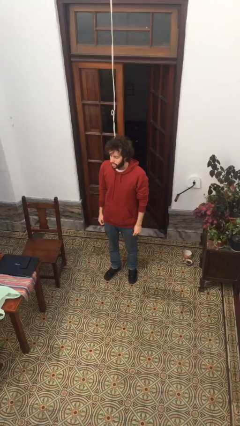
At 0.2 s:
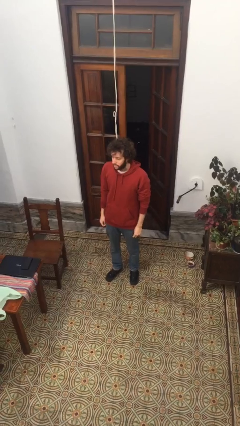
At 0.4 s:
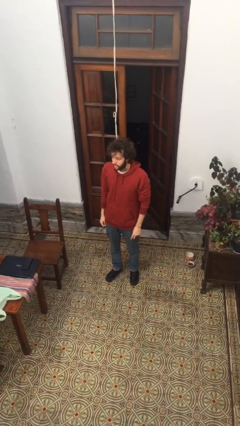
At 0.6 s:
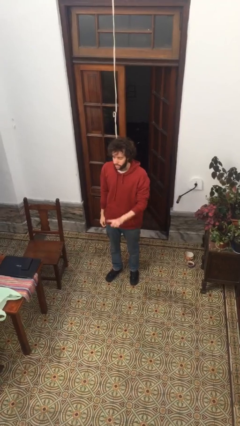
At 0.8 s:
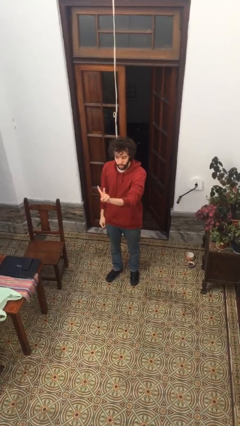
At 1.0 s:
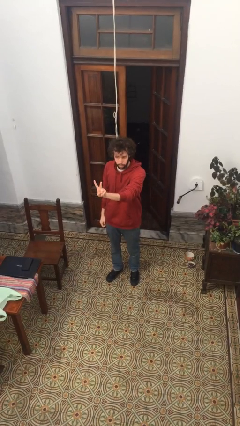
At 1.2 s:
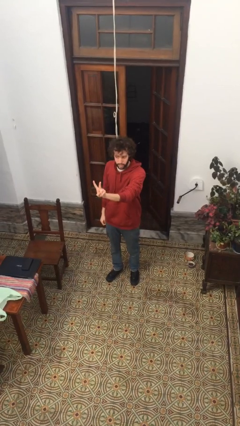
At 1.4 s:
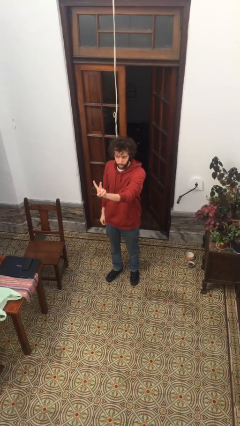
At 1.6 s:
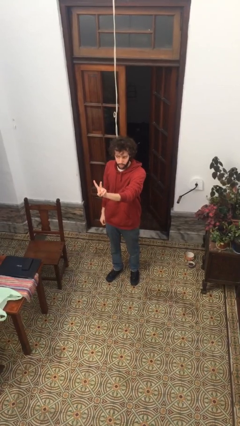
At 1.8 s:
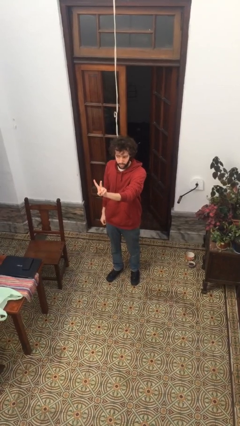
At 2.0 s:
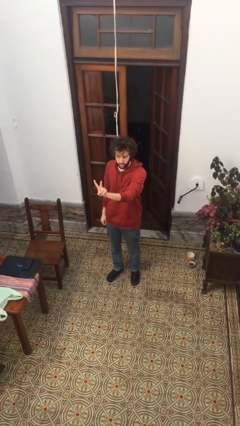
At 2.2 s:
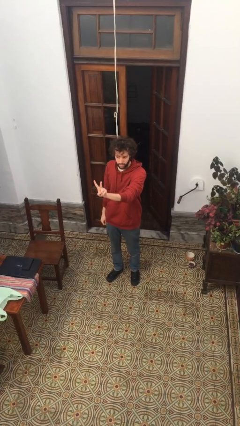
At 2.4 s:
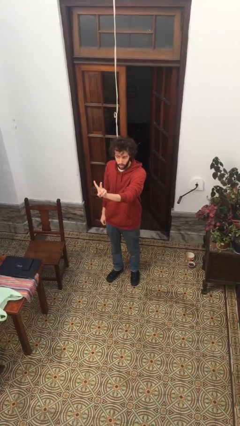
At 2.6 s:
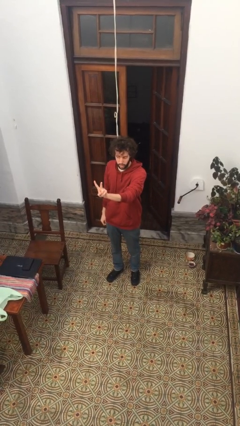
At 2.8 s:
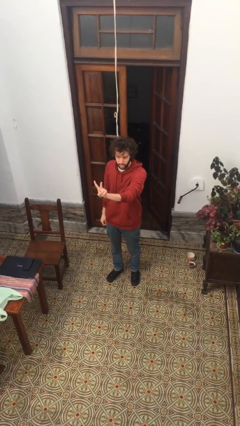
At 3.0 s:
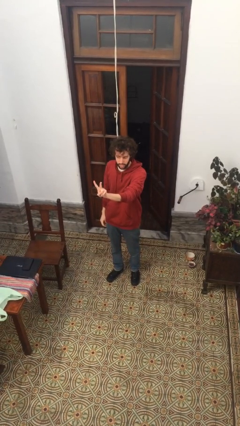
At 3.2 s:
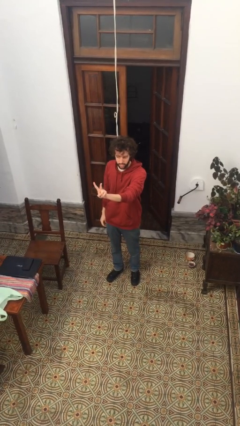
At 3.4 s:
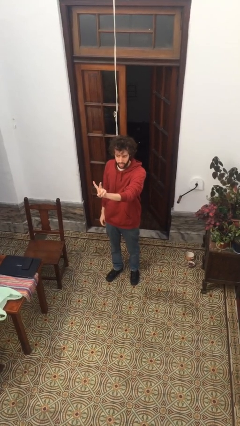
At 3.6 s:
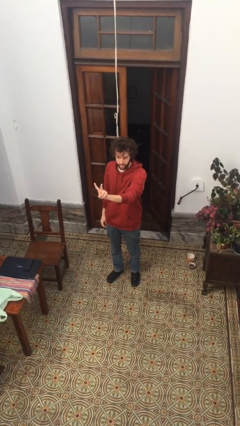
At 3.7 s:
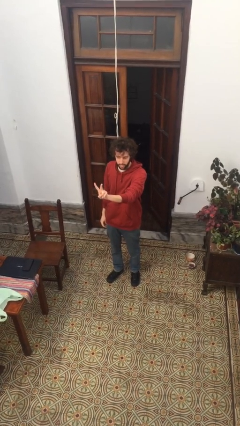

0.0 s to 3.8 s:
person gestures peace

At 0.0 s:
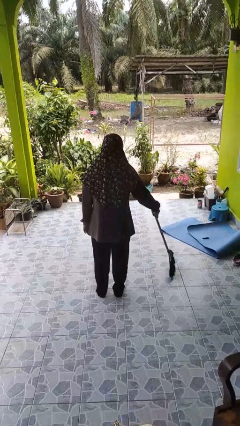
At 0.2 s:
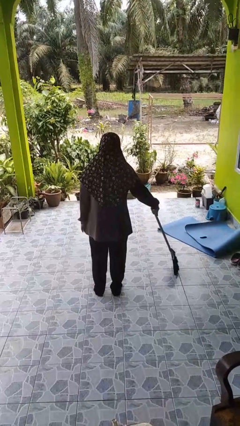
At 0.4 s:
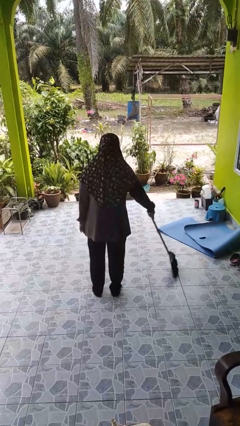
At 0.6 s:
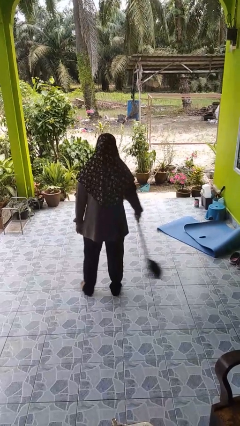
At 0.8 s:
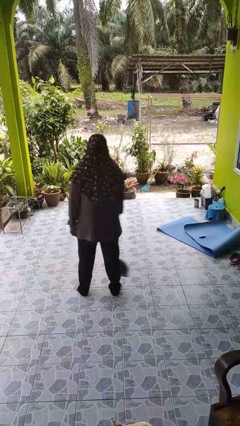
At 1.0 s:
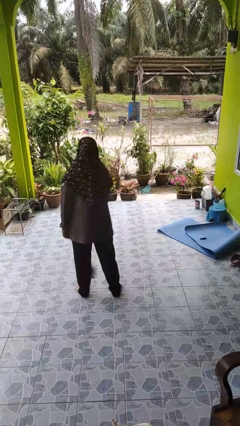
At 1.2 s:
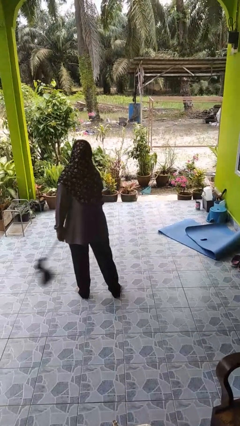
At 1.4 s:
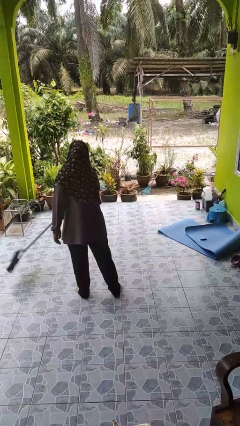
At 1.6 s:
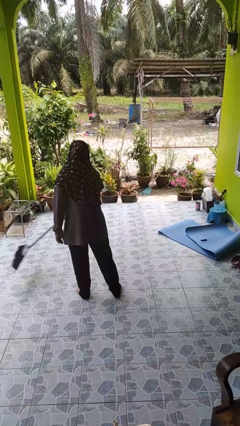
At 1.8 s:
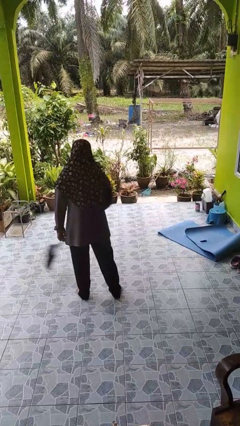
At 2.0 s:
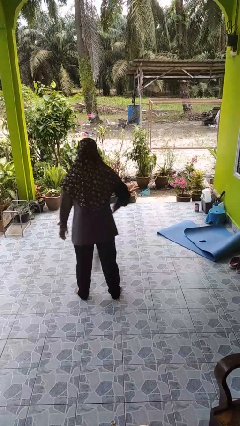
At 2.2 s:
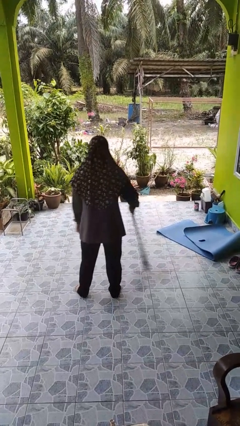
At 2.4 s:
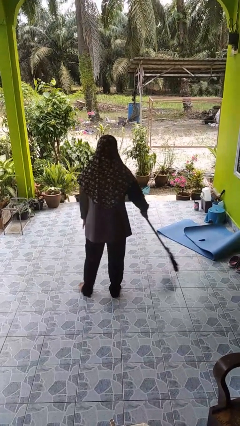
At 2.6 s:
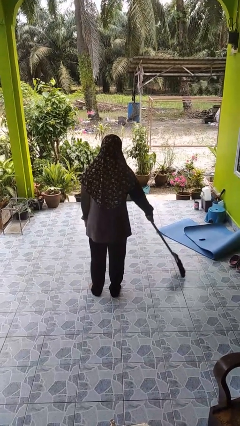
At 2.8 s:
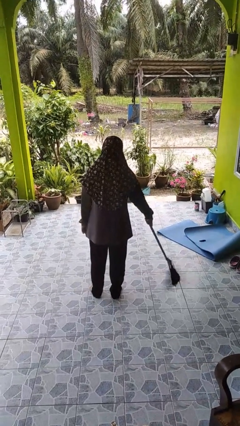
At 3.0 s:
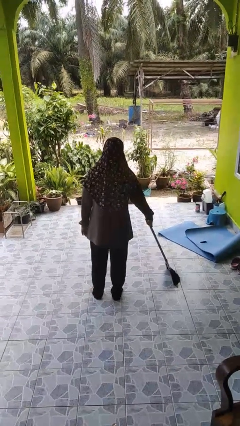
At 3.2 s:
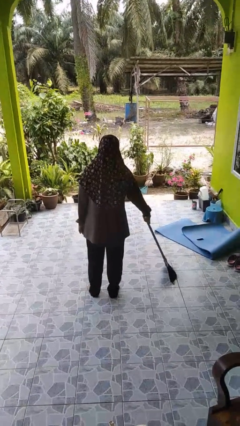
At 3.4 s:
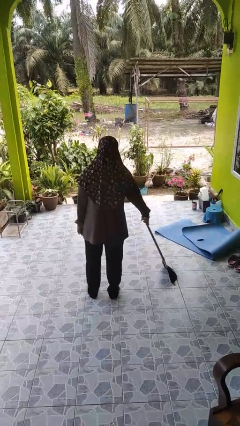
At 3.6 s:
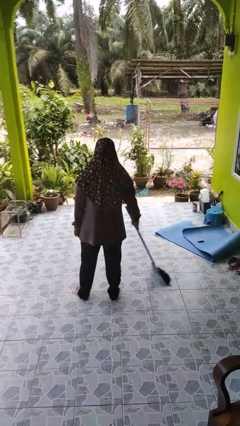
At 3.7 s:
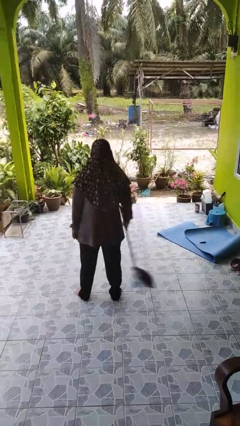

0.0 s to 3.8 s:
person sweeps floor

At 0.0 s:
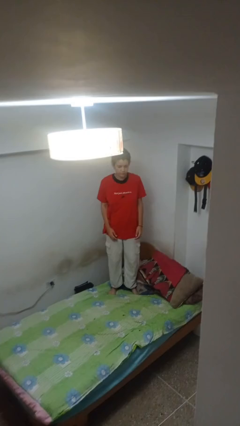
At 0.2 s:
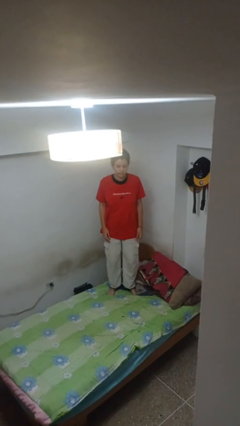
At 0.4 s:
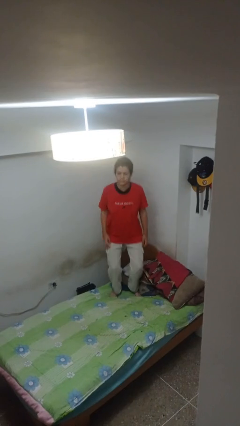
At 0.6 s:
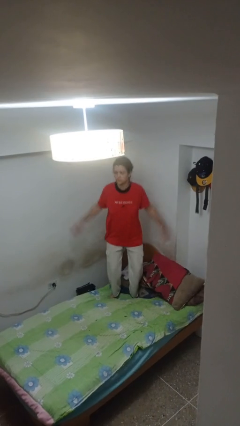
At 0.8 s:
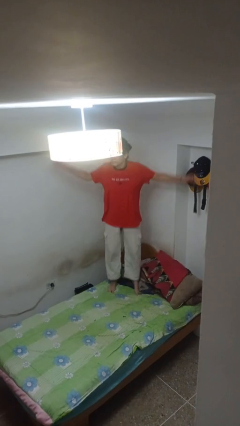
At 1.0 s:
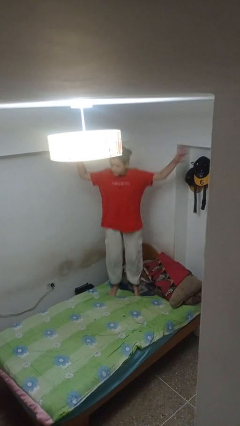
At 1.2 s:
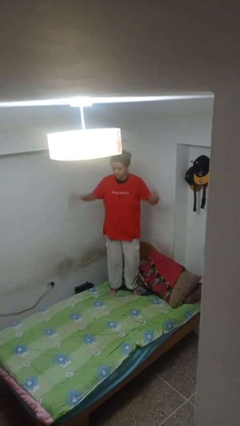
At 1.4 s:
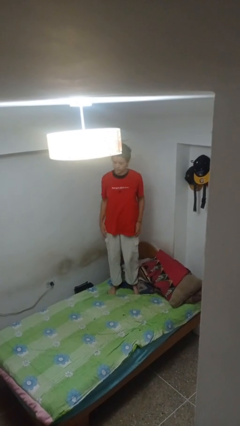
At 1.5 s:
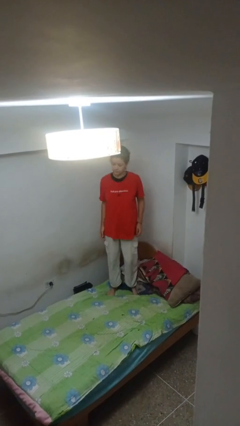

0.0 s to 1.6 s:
person jumps on bed

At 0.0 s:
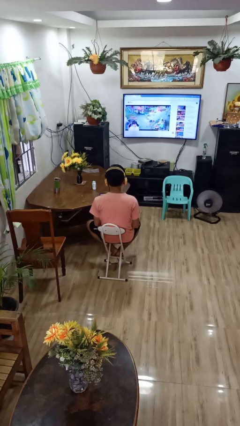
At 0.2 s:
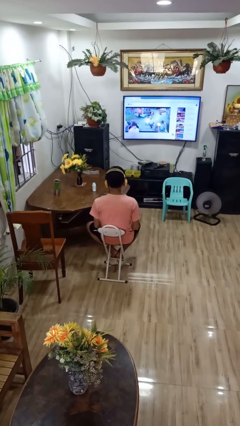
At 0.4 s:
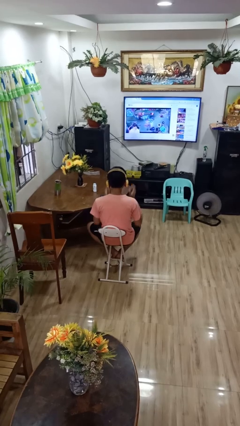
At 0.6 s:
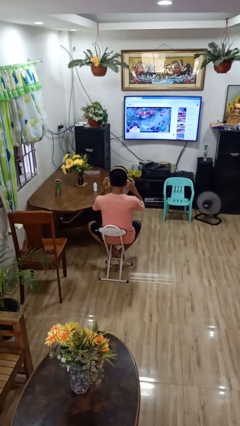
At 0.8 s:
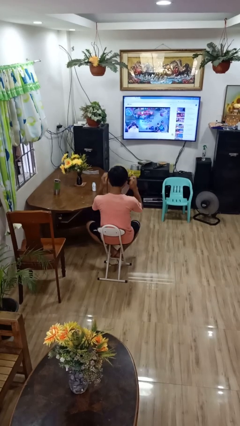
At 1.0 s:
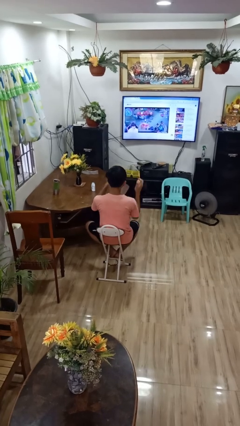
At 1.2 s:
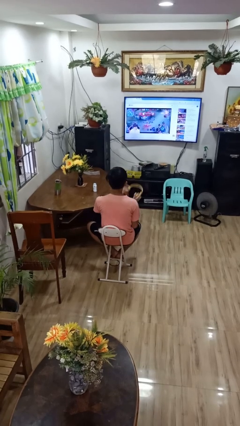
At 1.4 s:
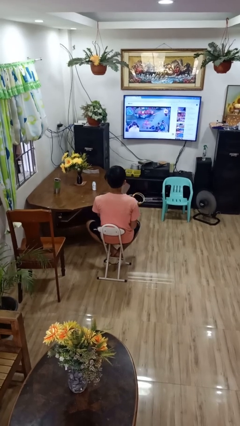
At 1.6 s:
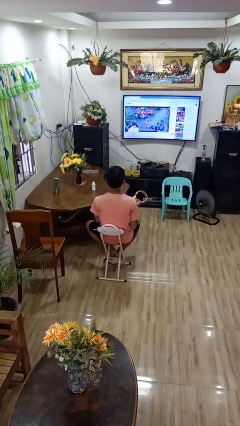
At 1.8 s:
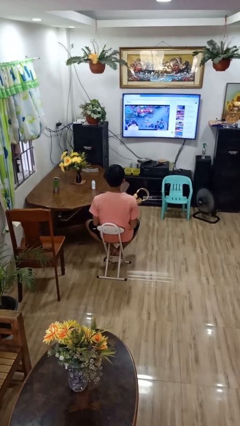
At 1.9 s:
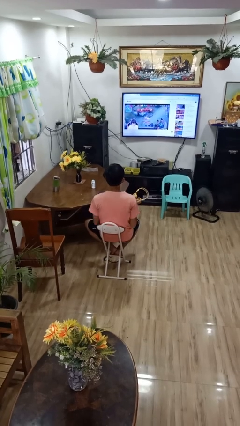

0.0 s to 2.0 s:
person takes off headphones

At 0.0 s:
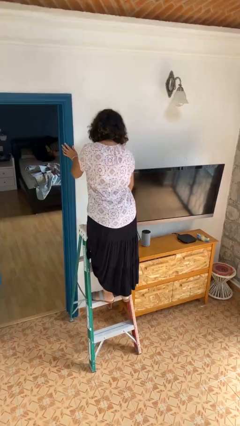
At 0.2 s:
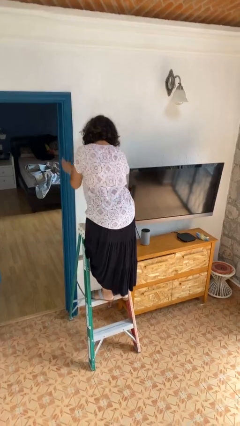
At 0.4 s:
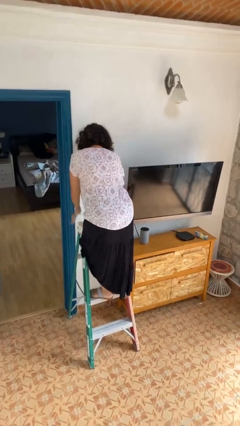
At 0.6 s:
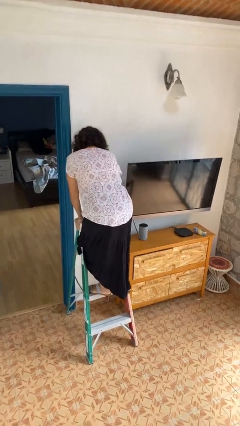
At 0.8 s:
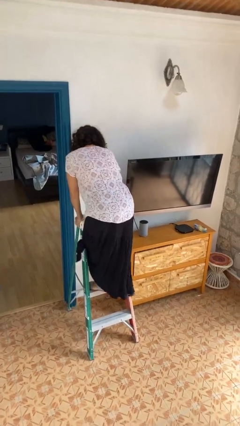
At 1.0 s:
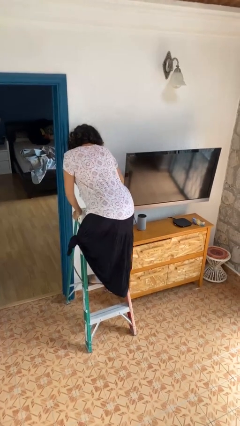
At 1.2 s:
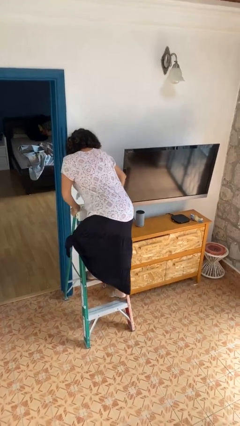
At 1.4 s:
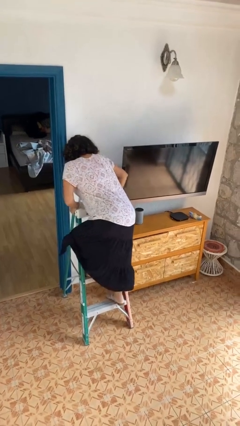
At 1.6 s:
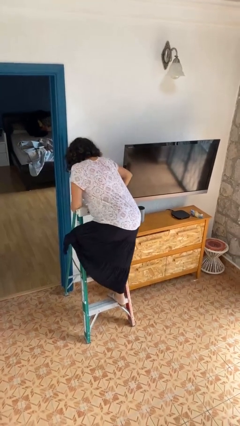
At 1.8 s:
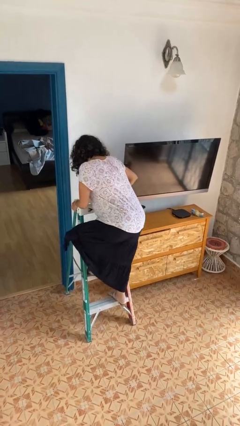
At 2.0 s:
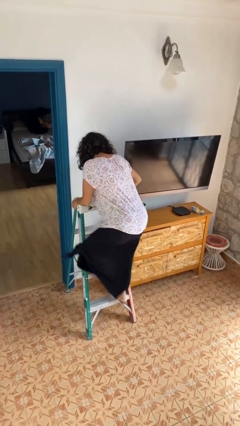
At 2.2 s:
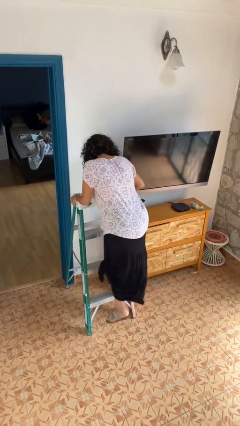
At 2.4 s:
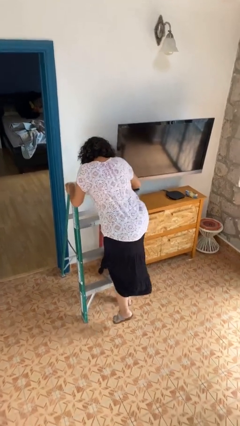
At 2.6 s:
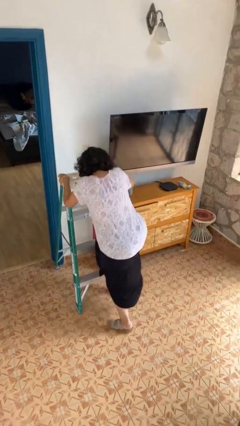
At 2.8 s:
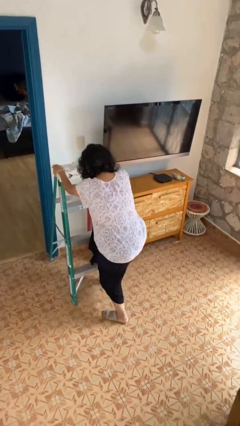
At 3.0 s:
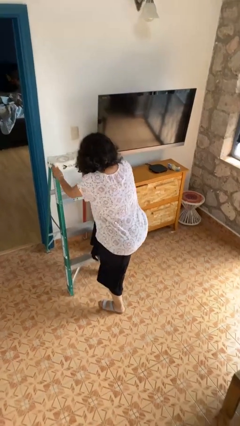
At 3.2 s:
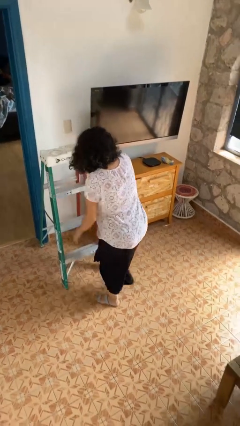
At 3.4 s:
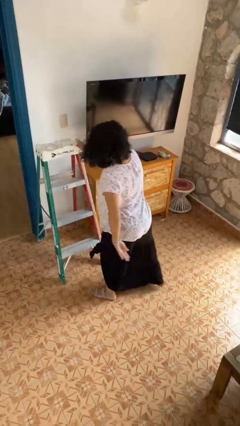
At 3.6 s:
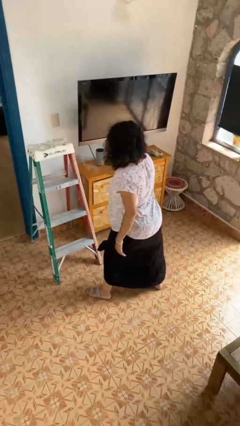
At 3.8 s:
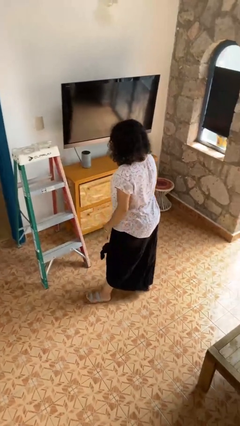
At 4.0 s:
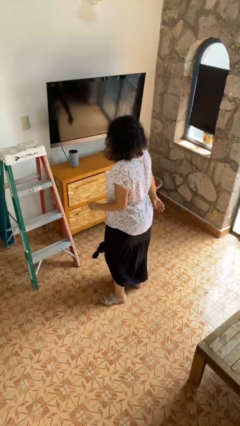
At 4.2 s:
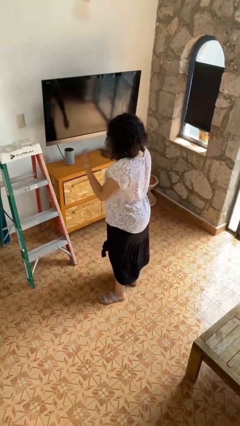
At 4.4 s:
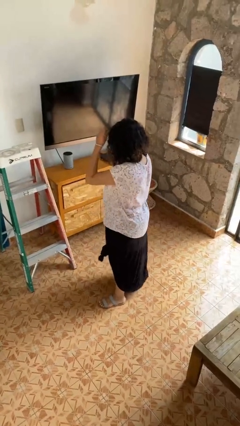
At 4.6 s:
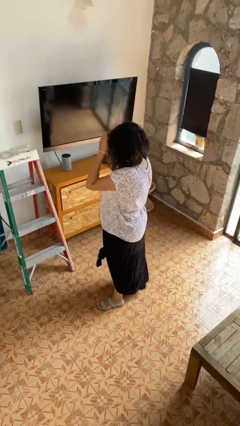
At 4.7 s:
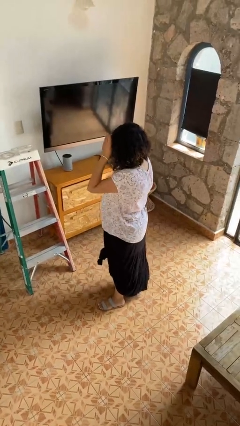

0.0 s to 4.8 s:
person climbs down ladder

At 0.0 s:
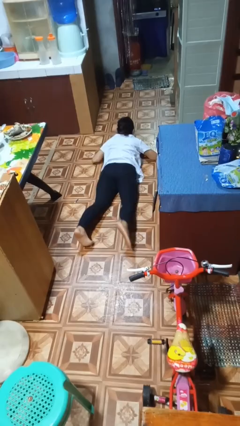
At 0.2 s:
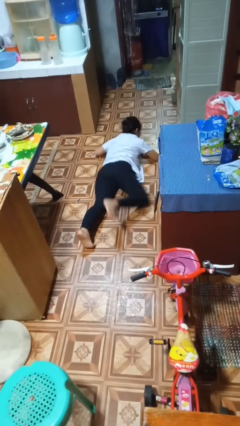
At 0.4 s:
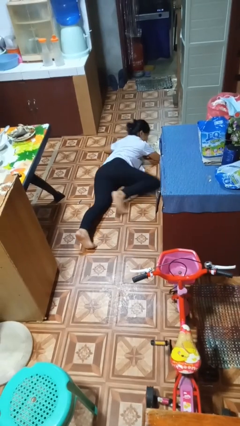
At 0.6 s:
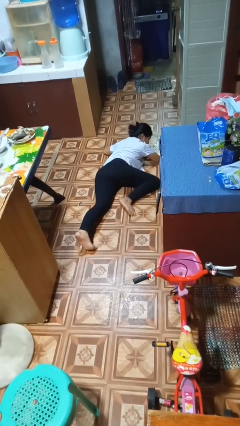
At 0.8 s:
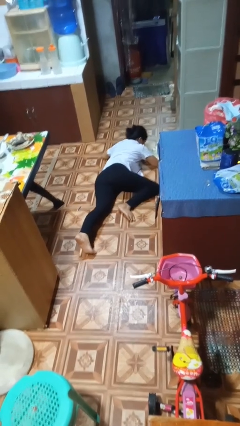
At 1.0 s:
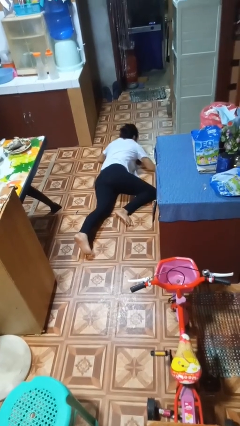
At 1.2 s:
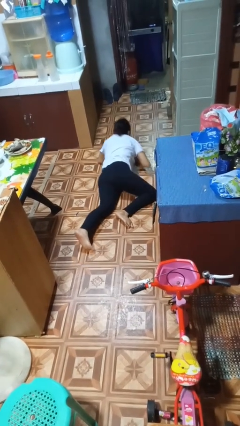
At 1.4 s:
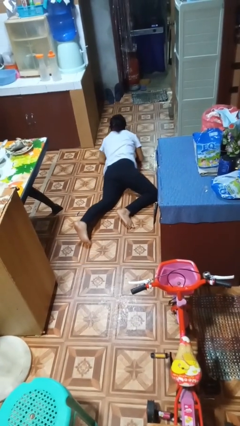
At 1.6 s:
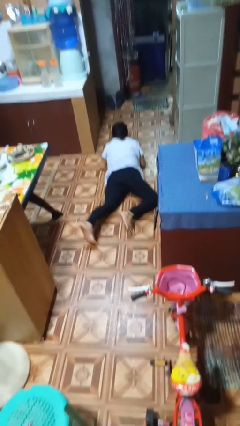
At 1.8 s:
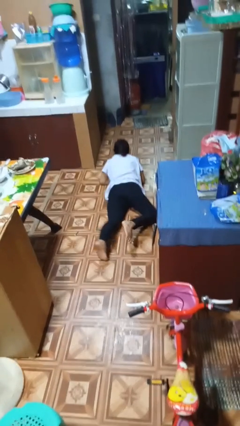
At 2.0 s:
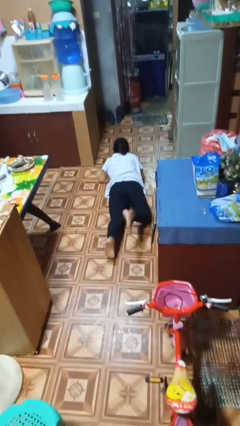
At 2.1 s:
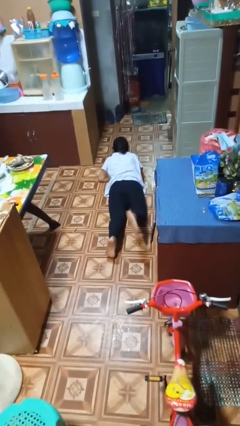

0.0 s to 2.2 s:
person crawls
